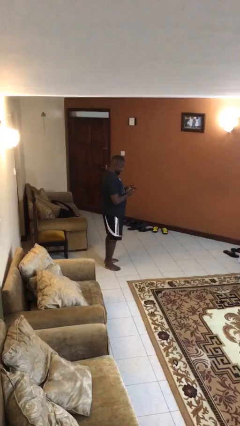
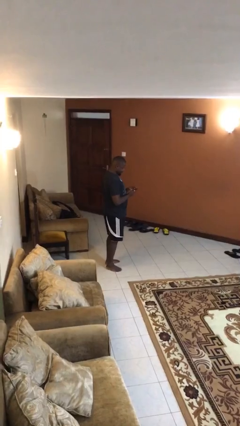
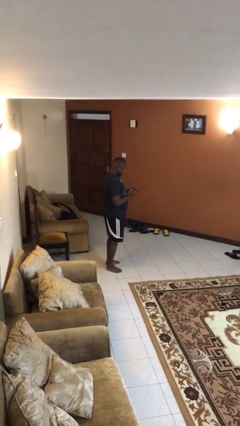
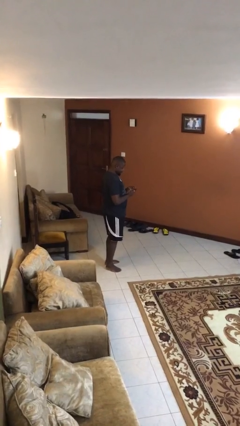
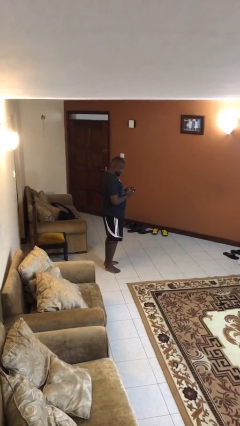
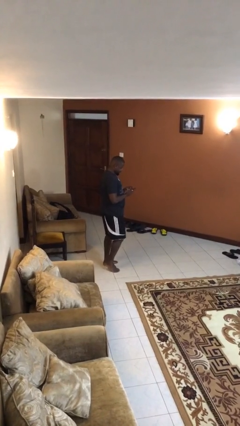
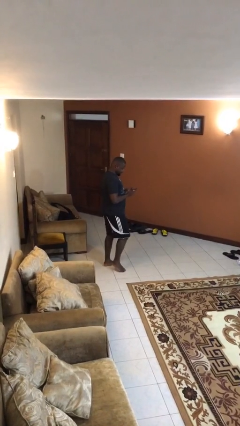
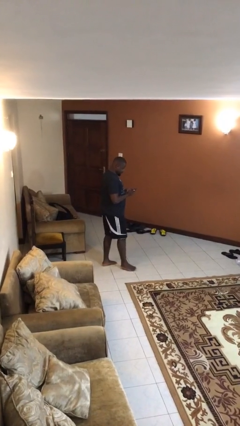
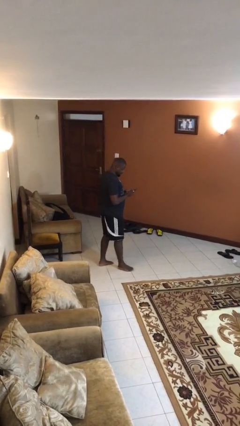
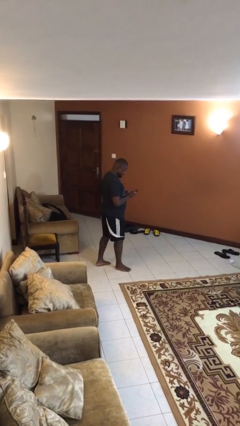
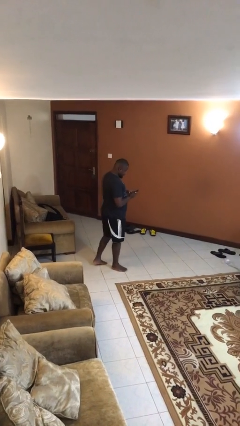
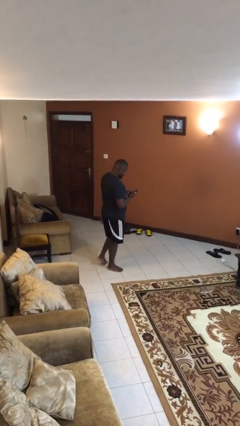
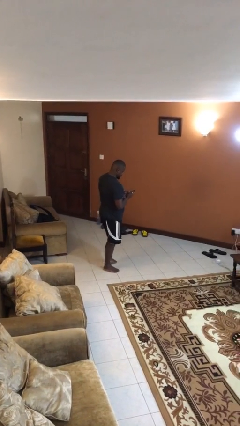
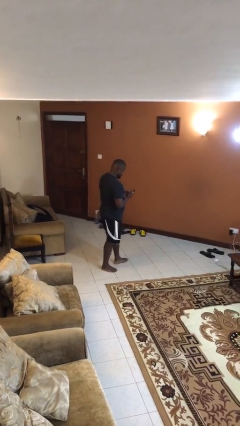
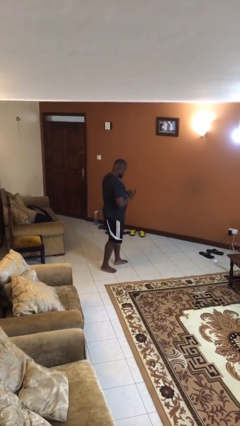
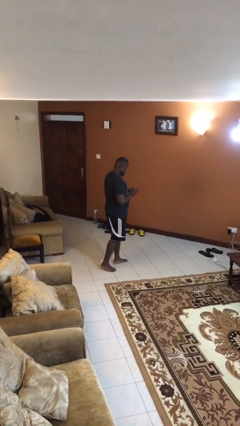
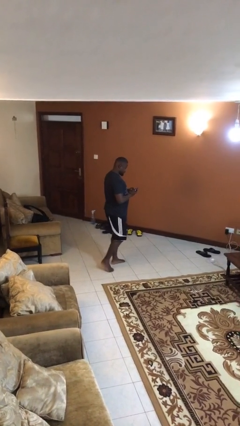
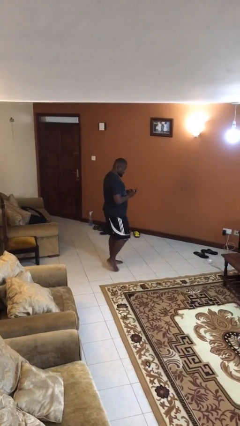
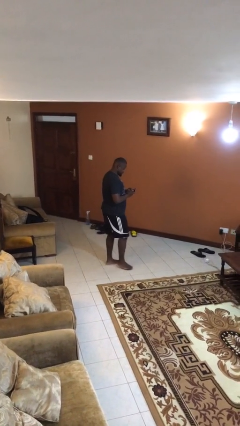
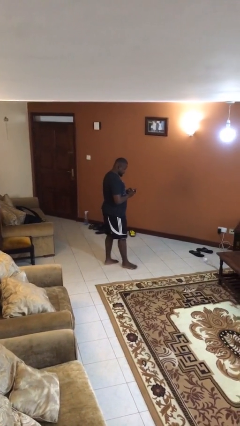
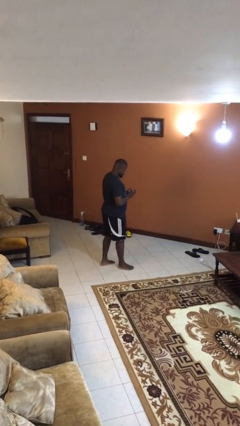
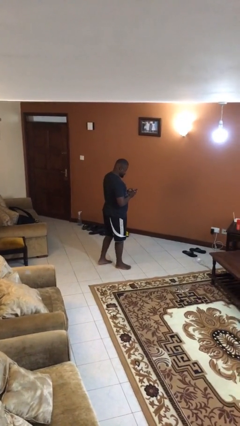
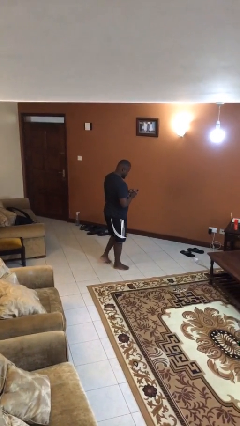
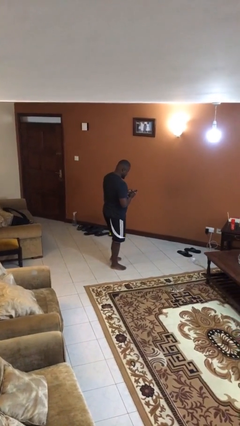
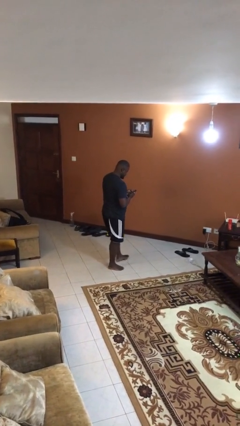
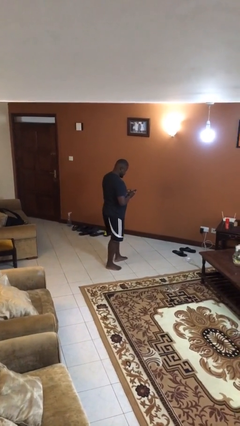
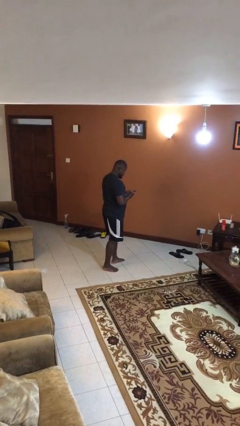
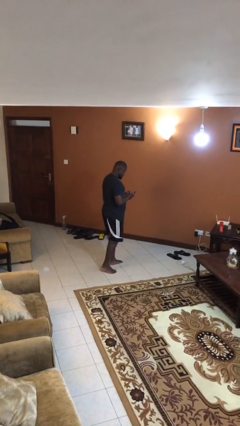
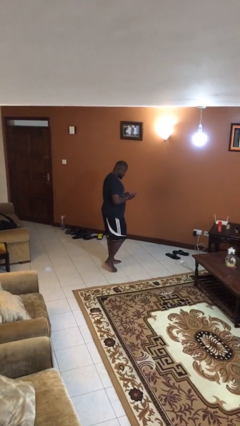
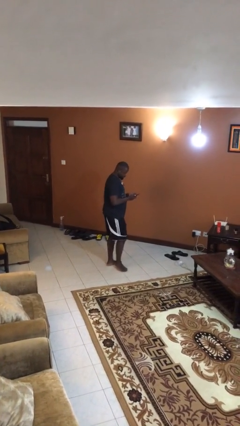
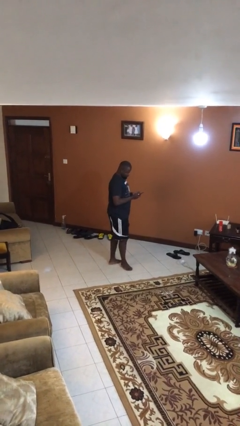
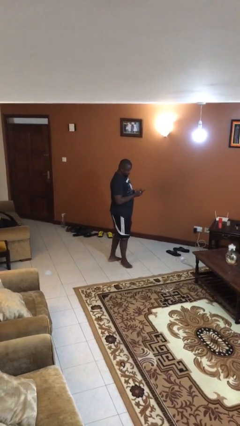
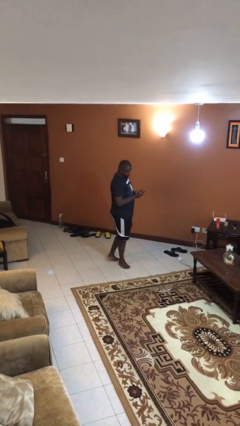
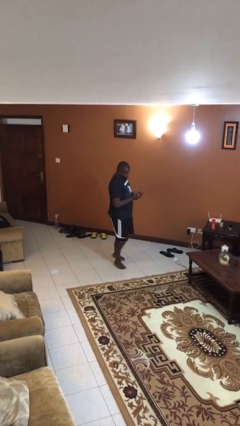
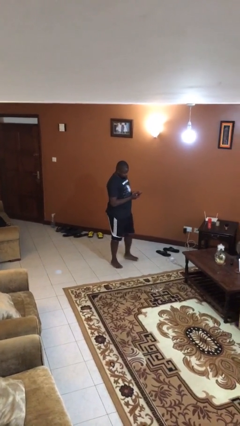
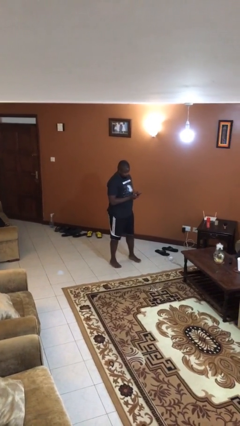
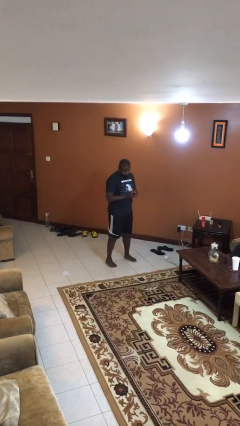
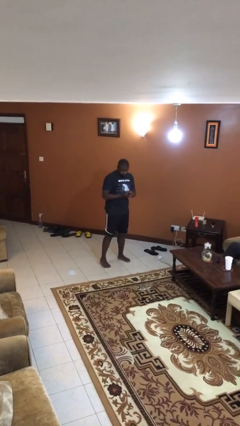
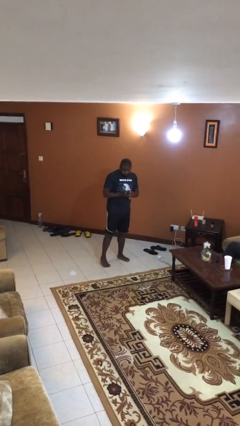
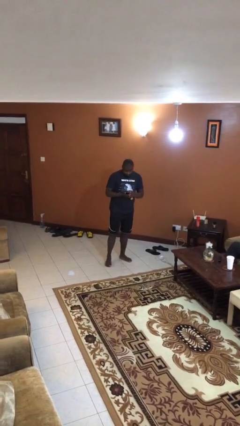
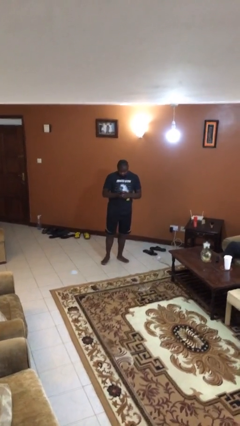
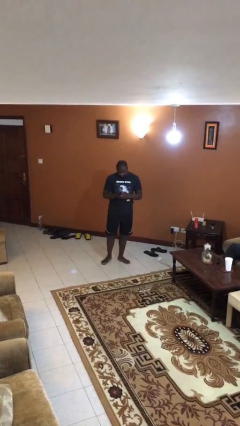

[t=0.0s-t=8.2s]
person texts on phone

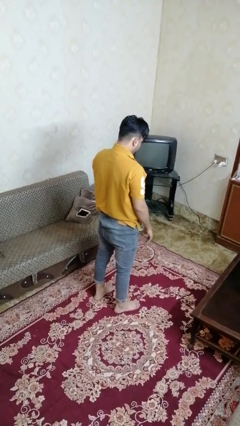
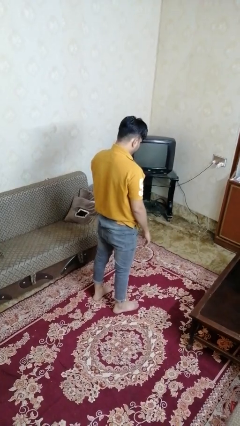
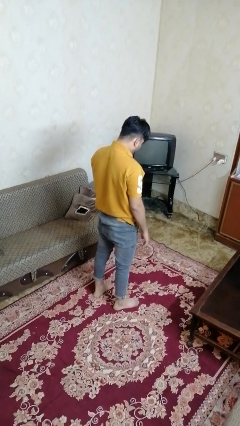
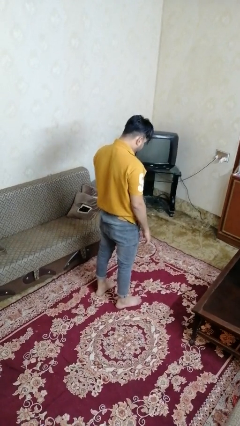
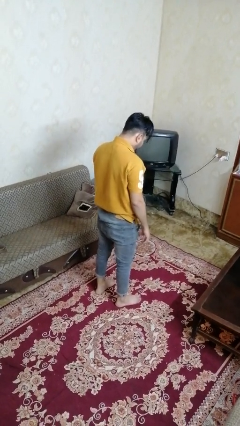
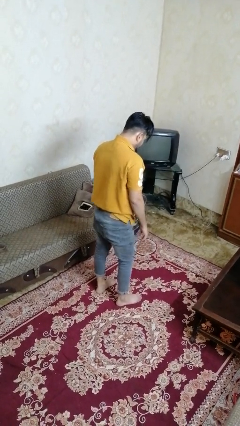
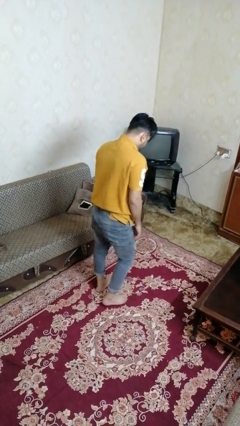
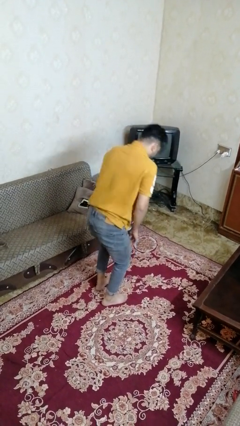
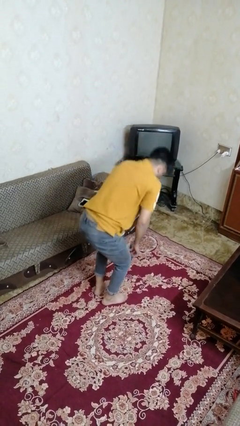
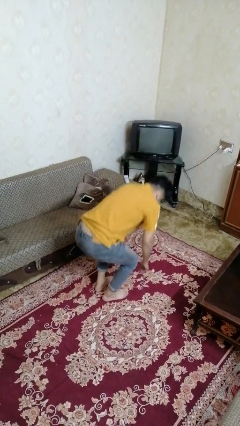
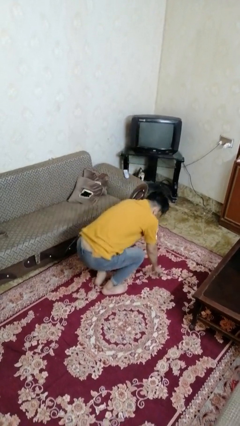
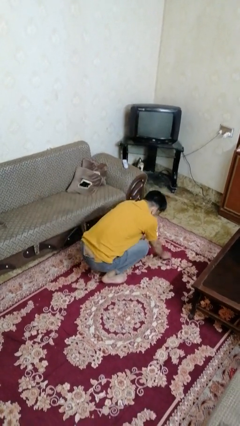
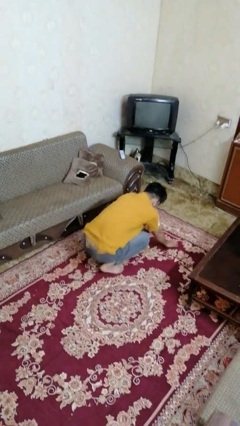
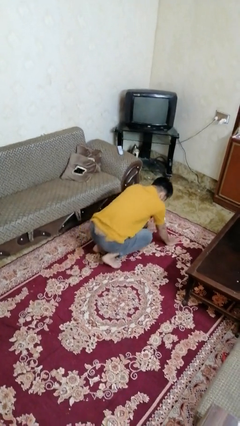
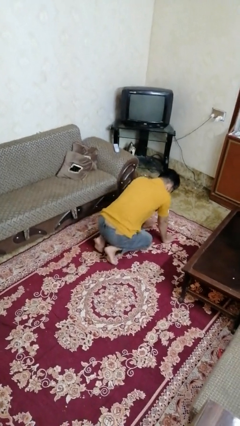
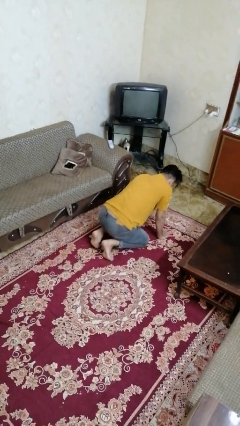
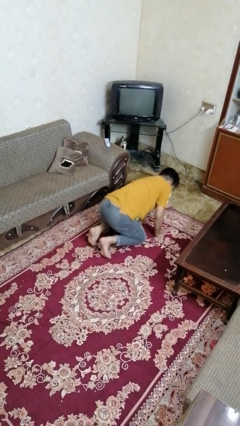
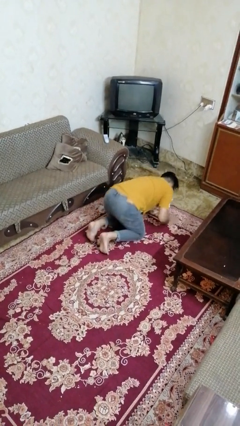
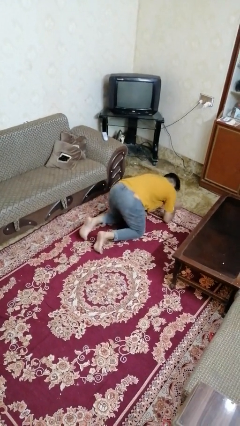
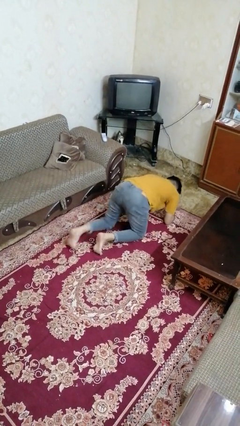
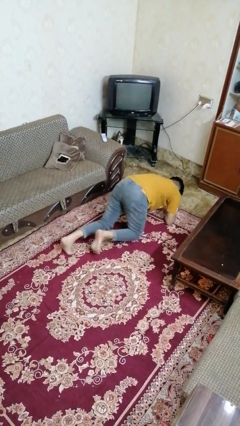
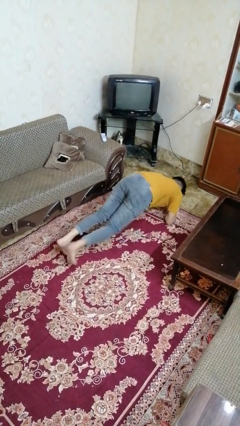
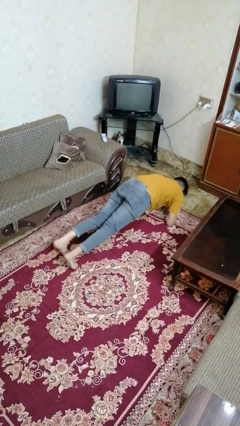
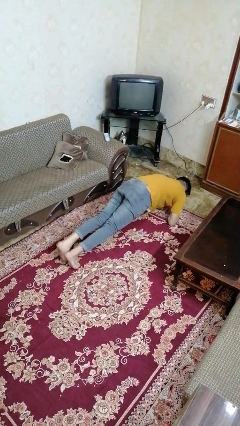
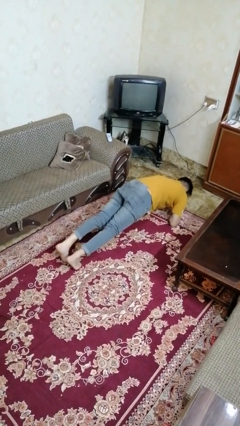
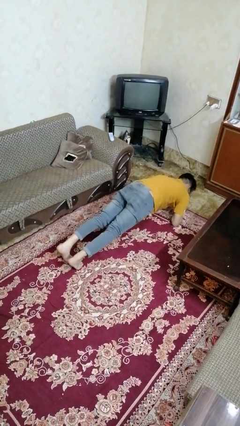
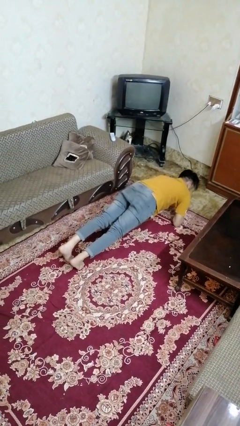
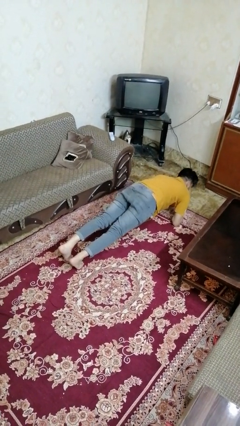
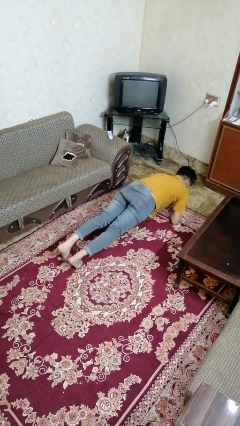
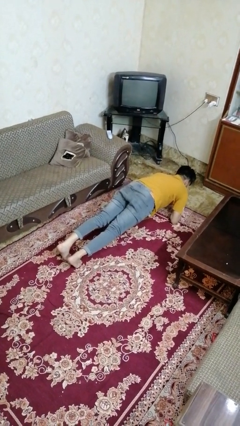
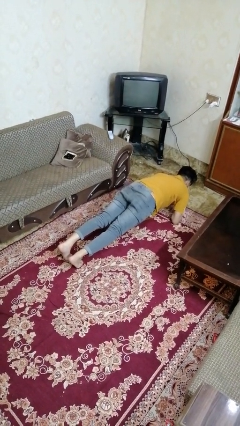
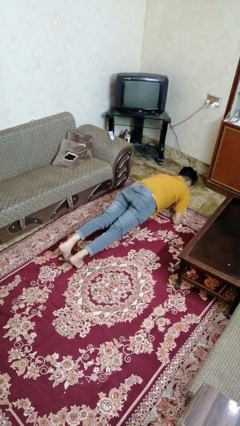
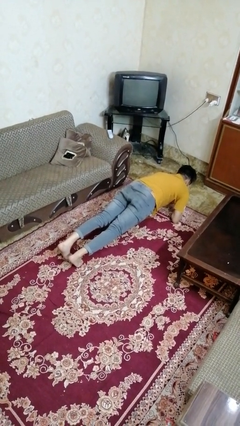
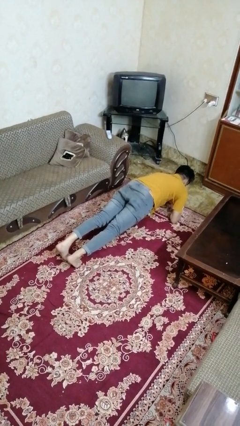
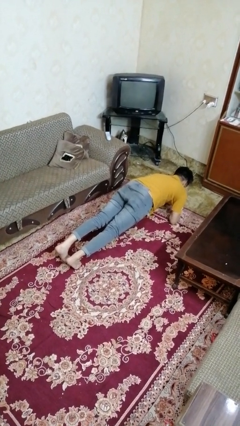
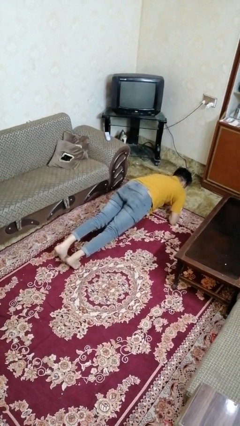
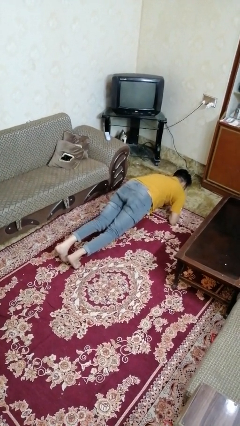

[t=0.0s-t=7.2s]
person exercises with plank

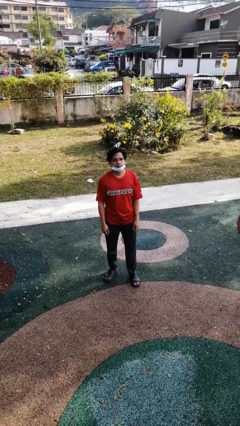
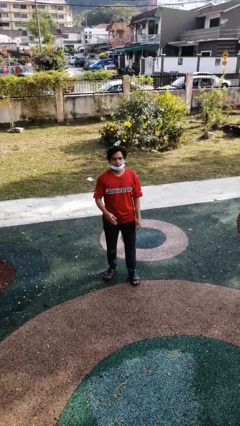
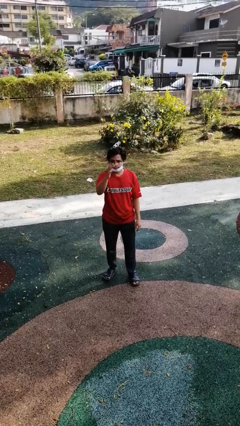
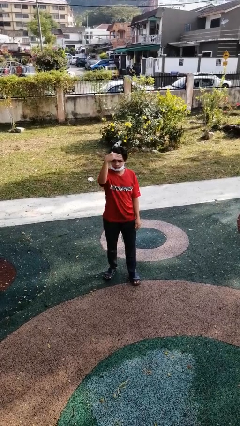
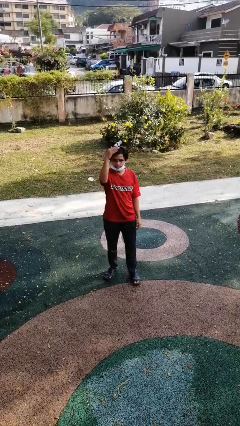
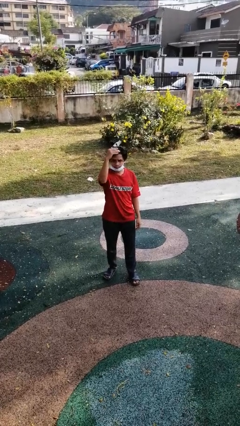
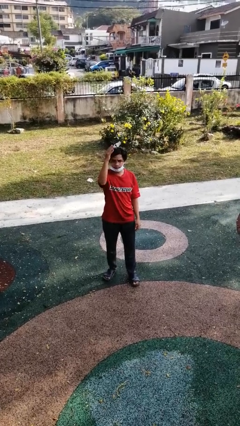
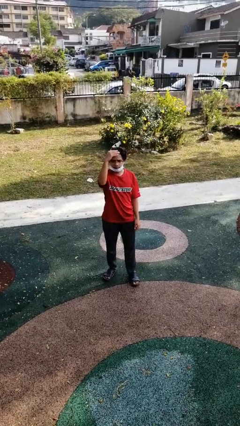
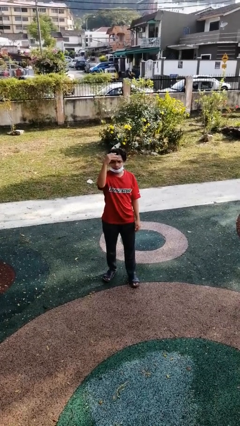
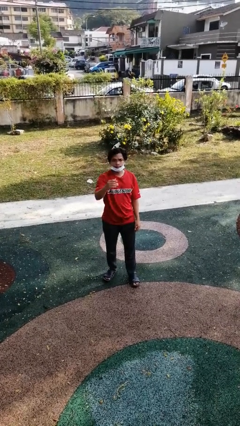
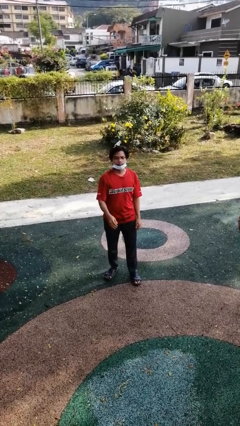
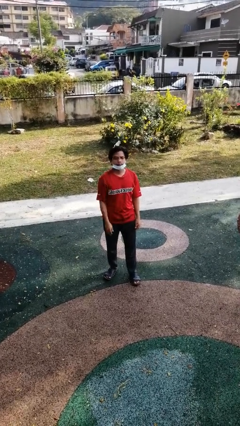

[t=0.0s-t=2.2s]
person gestures come here

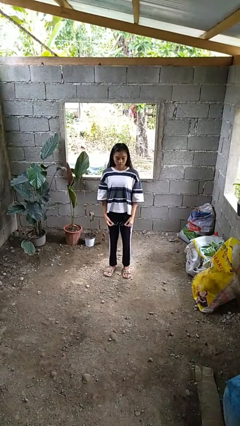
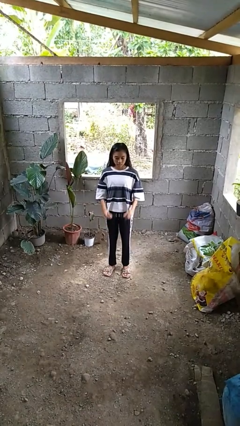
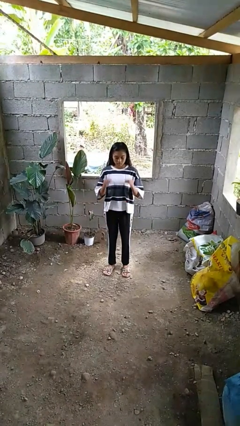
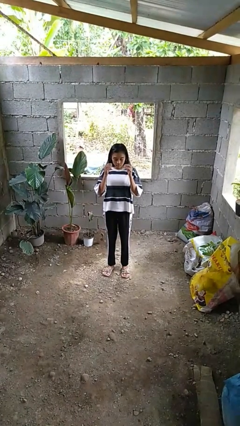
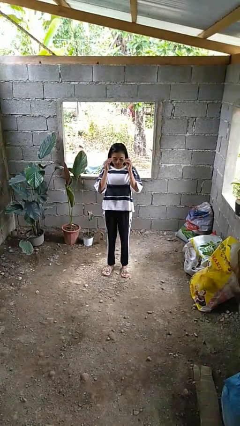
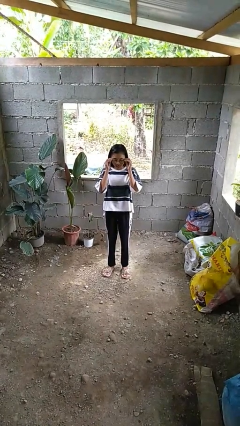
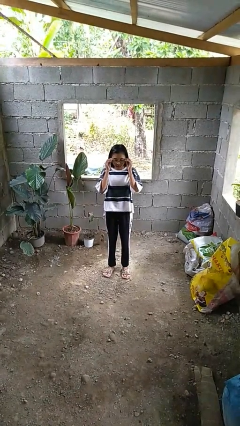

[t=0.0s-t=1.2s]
person puts on glasses
